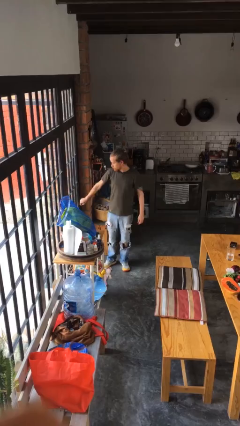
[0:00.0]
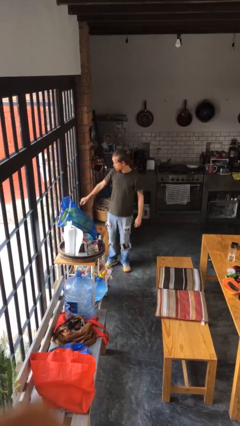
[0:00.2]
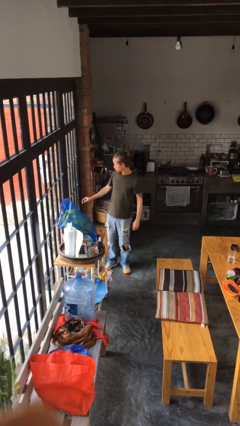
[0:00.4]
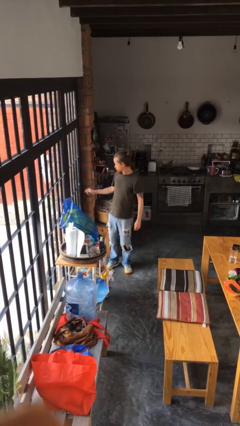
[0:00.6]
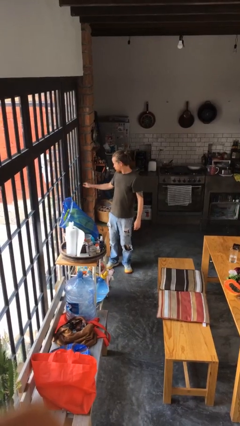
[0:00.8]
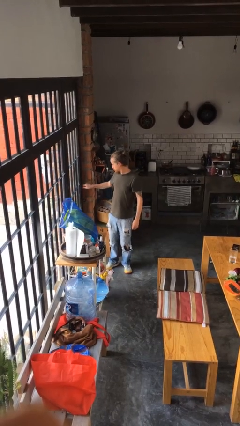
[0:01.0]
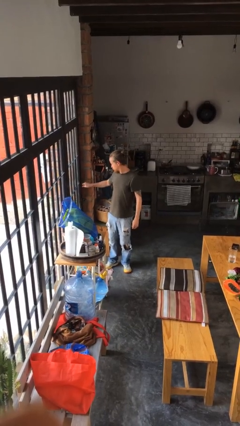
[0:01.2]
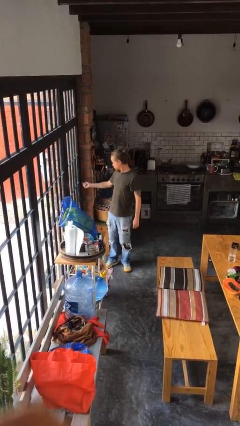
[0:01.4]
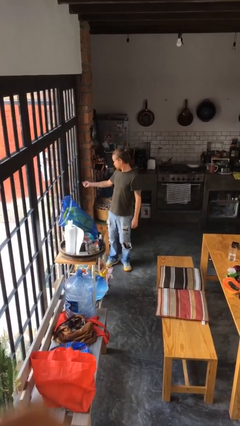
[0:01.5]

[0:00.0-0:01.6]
person locks door with keys

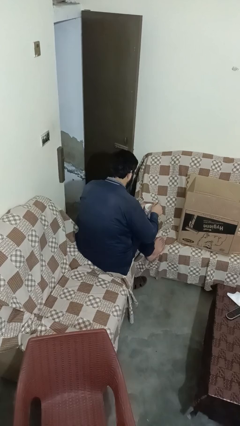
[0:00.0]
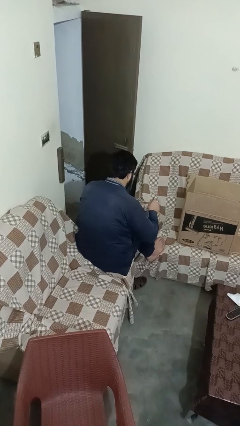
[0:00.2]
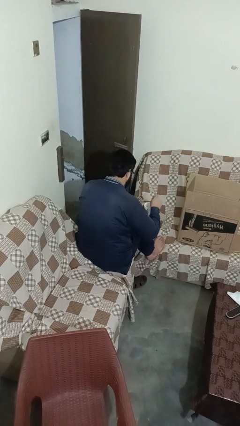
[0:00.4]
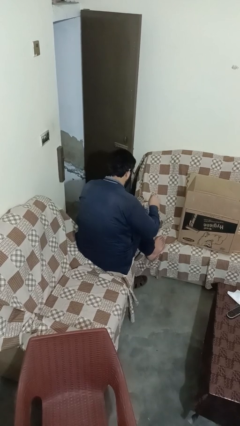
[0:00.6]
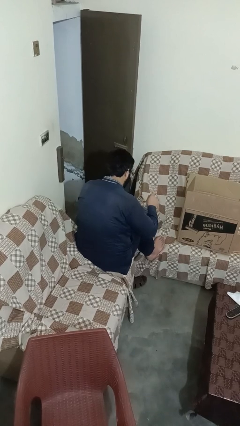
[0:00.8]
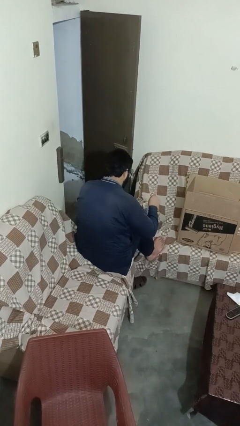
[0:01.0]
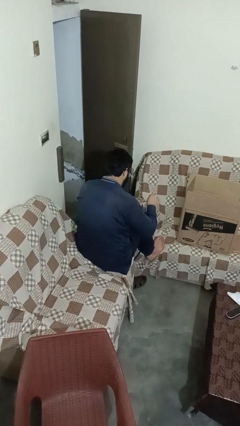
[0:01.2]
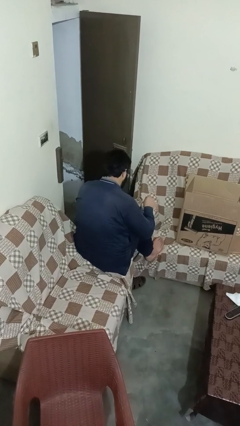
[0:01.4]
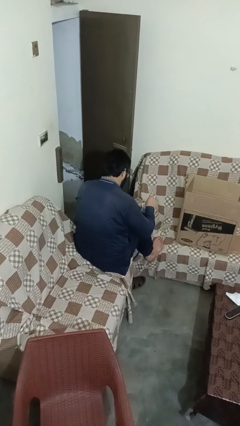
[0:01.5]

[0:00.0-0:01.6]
person stirs mug

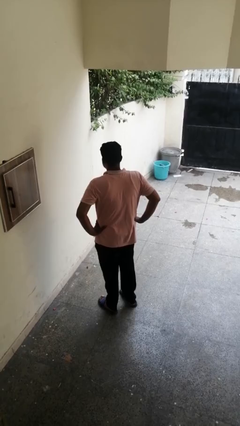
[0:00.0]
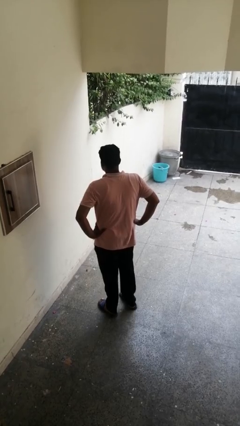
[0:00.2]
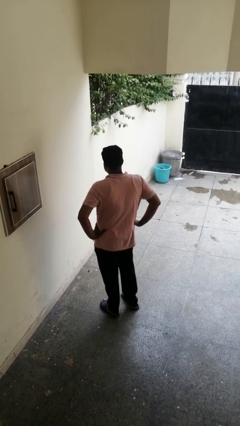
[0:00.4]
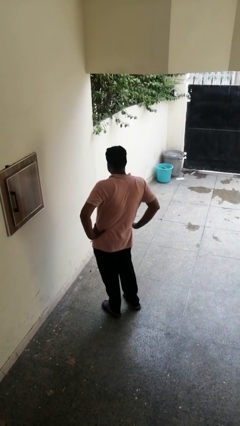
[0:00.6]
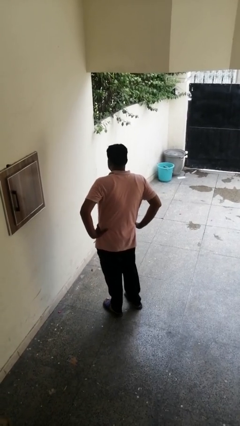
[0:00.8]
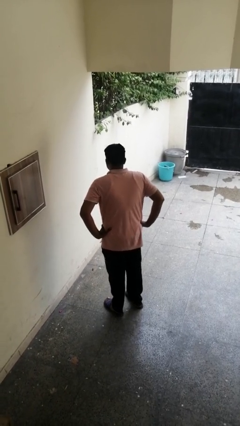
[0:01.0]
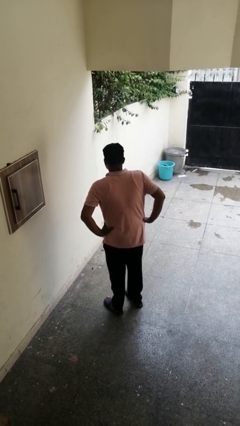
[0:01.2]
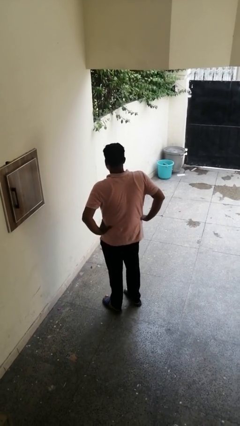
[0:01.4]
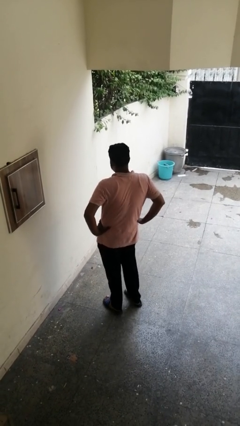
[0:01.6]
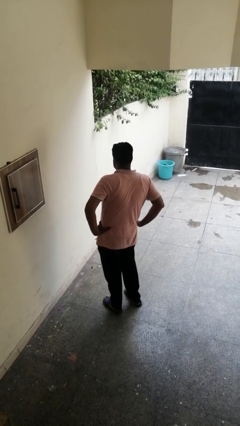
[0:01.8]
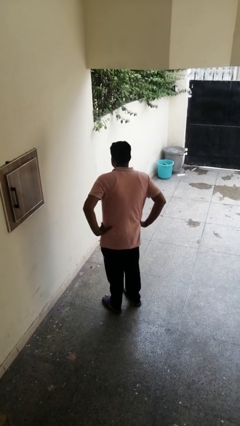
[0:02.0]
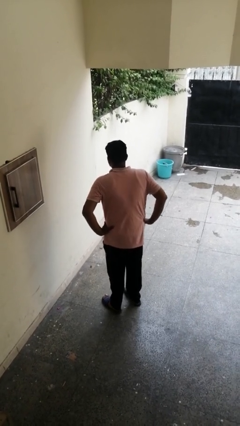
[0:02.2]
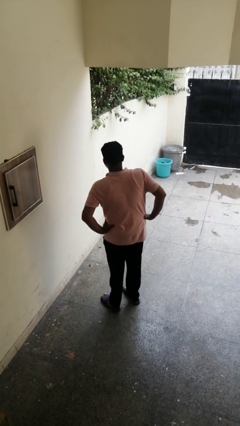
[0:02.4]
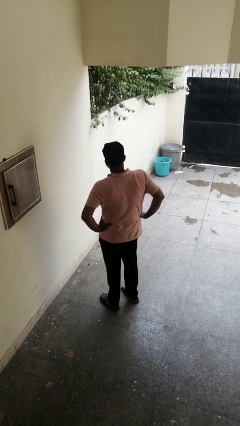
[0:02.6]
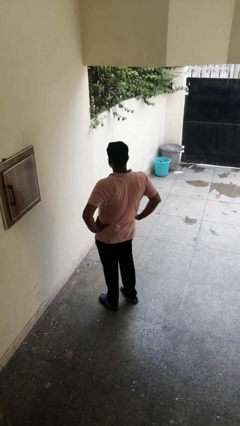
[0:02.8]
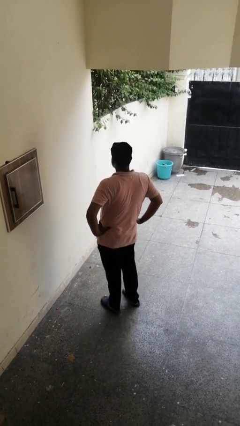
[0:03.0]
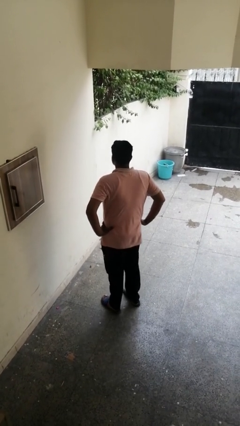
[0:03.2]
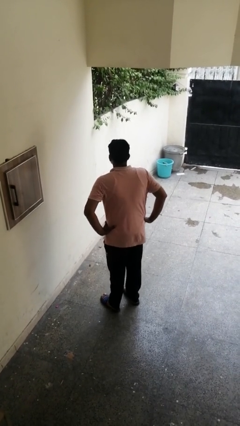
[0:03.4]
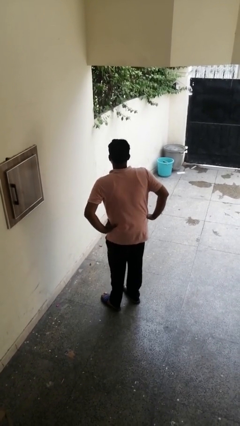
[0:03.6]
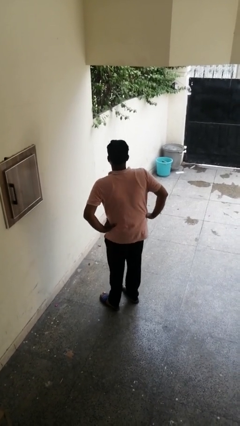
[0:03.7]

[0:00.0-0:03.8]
person wiggles hips

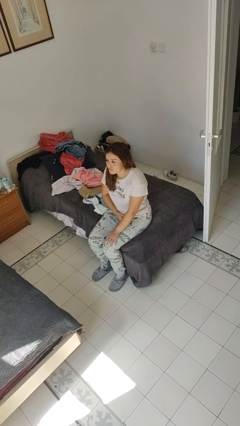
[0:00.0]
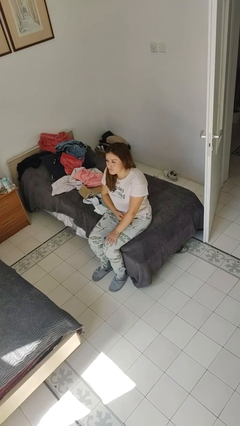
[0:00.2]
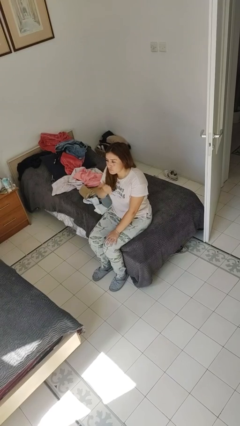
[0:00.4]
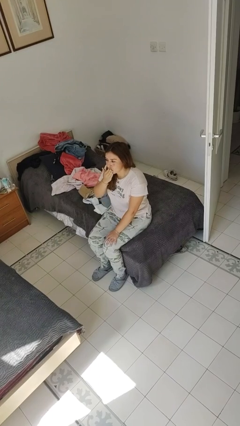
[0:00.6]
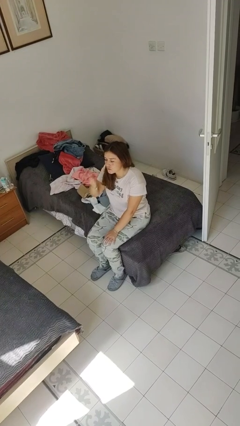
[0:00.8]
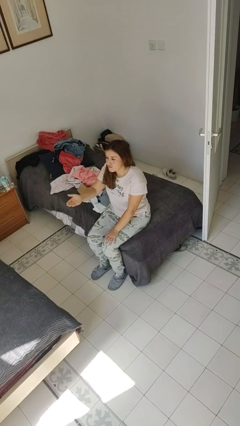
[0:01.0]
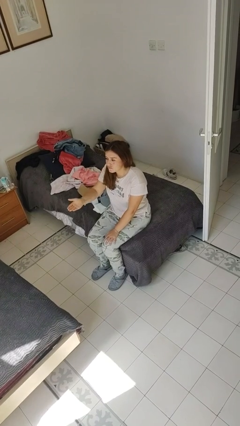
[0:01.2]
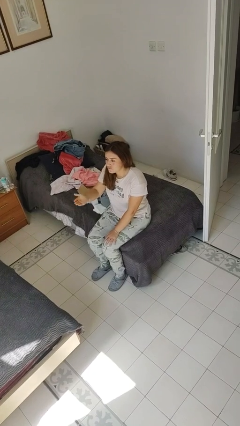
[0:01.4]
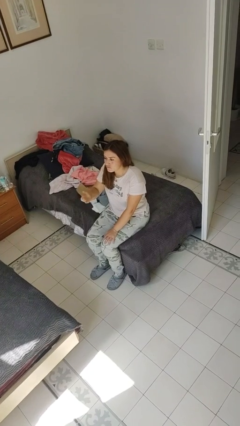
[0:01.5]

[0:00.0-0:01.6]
person gestures blow kiss

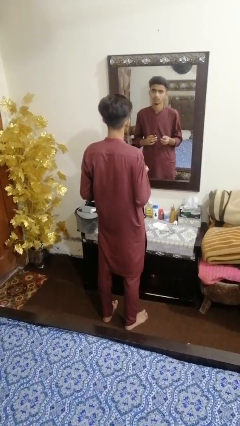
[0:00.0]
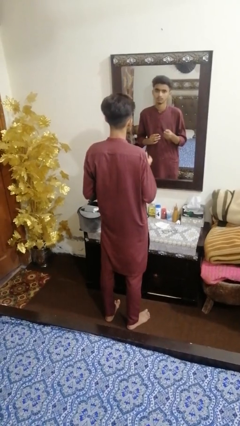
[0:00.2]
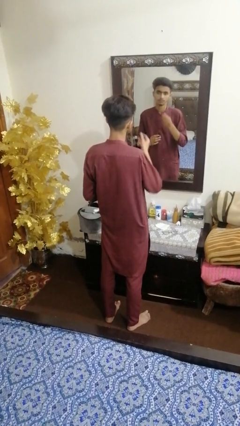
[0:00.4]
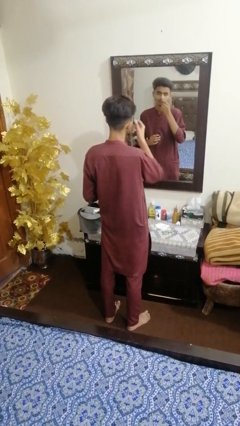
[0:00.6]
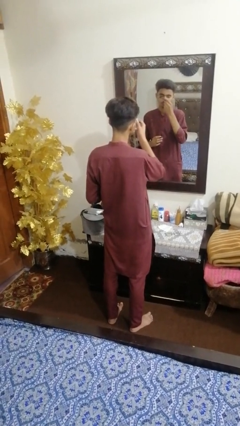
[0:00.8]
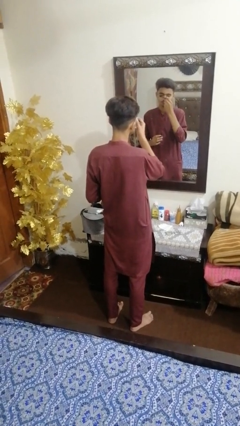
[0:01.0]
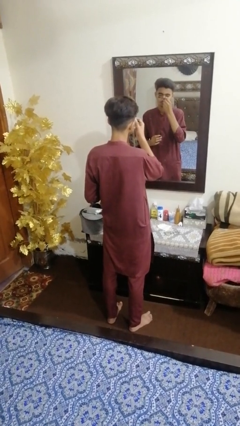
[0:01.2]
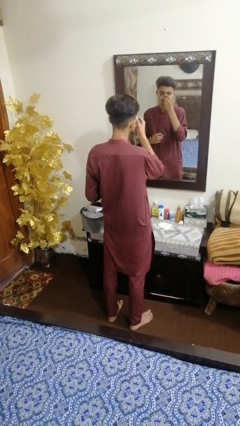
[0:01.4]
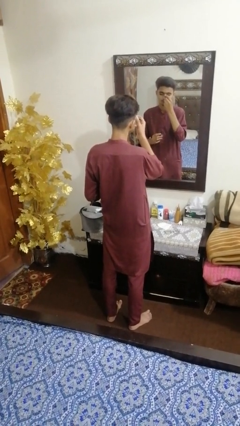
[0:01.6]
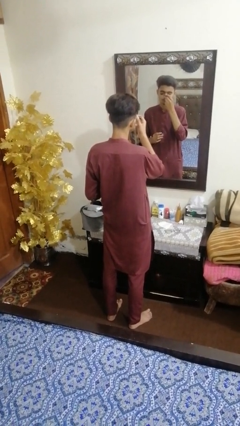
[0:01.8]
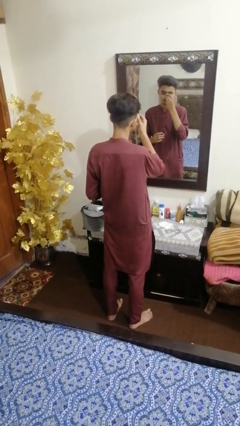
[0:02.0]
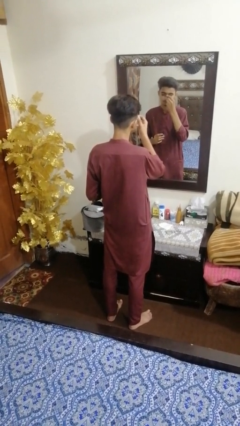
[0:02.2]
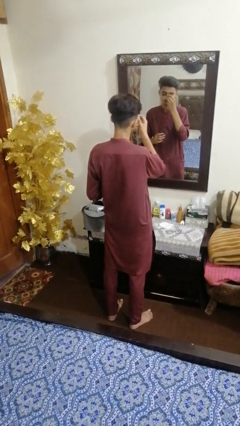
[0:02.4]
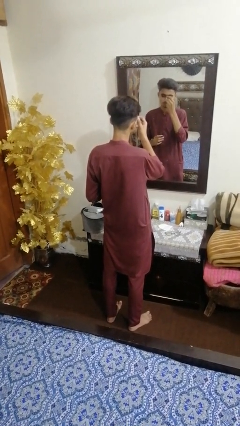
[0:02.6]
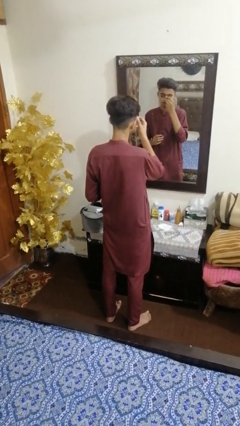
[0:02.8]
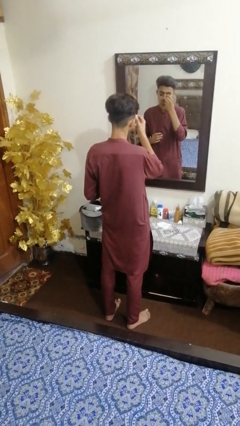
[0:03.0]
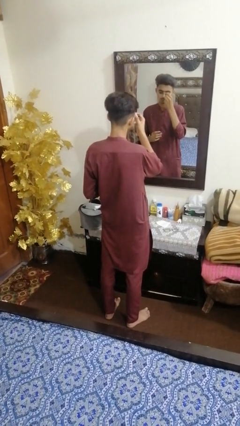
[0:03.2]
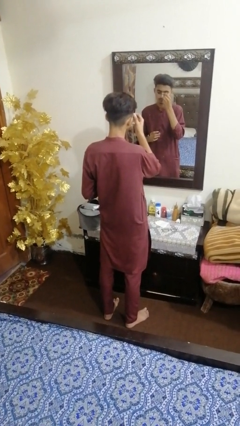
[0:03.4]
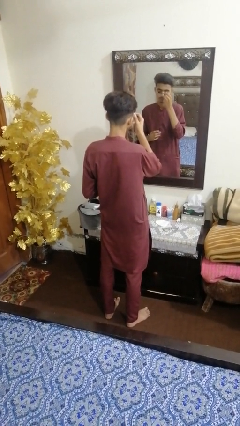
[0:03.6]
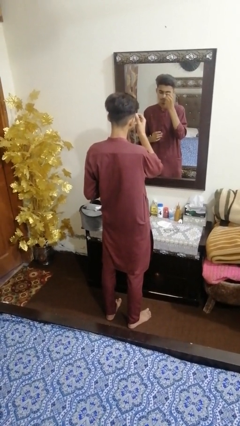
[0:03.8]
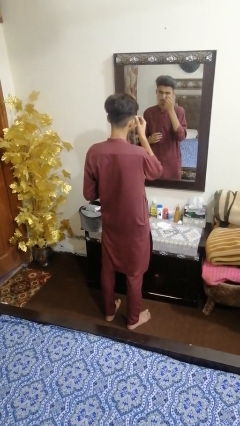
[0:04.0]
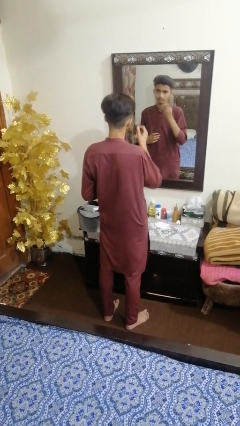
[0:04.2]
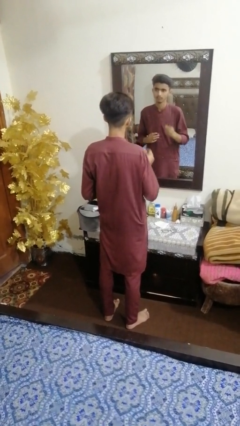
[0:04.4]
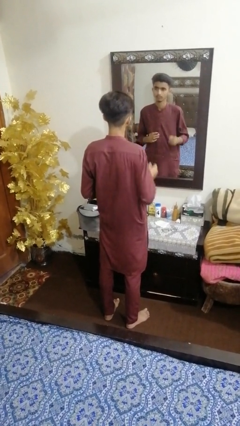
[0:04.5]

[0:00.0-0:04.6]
person applies eye makeup

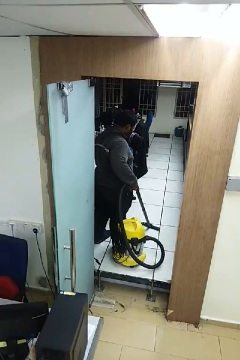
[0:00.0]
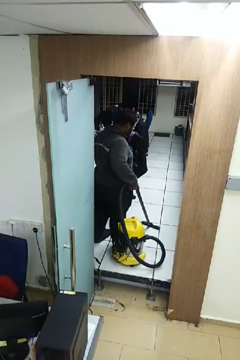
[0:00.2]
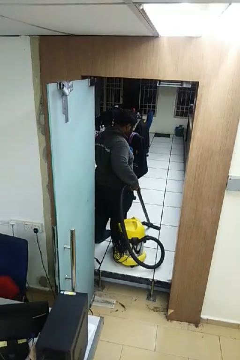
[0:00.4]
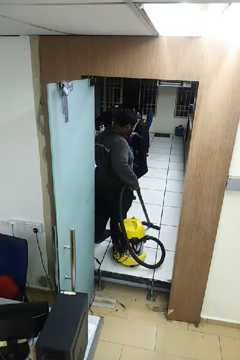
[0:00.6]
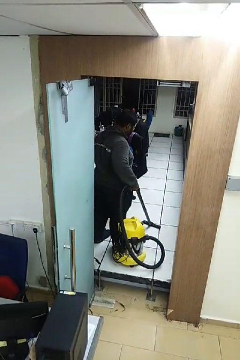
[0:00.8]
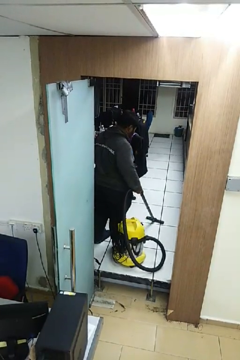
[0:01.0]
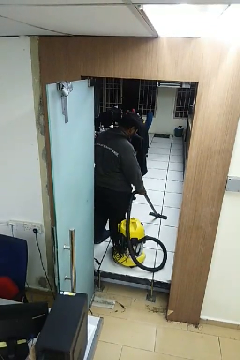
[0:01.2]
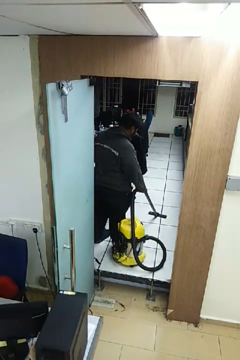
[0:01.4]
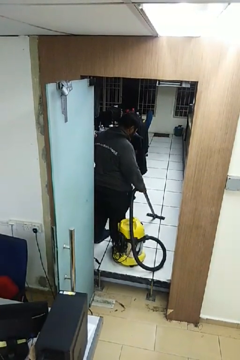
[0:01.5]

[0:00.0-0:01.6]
person vacuums carpet

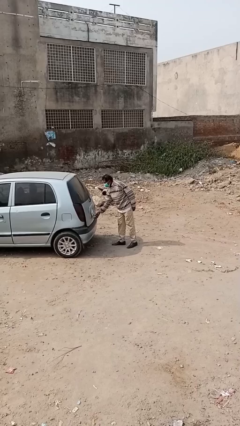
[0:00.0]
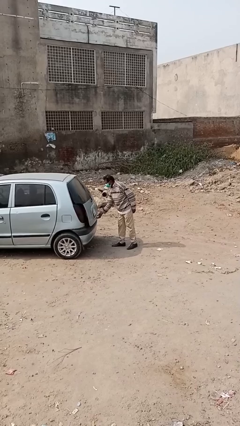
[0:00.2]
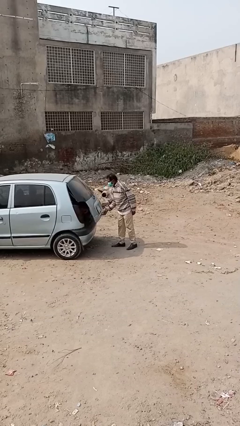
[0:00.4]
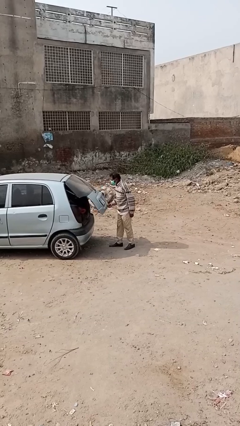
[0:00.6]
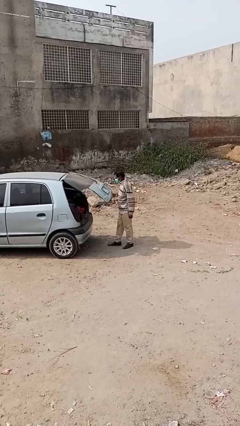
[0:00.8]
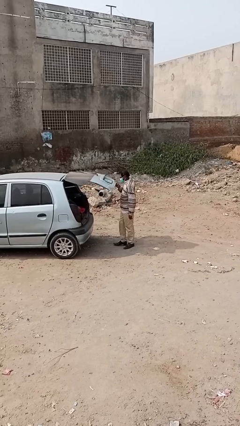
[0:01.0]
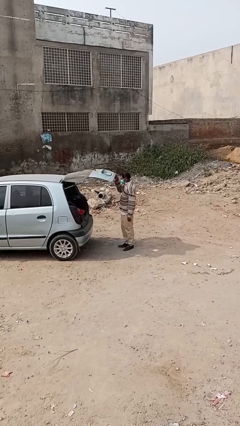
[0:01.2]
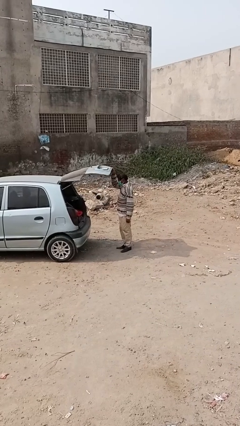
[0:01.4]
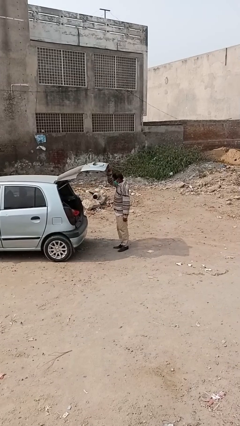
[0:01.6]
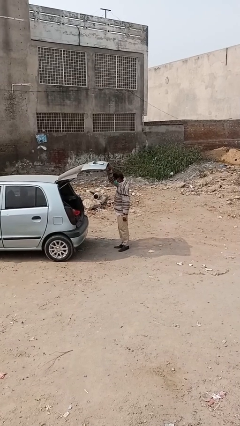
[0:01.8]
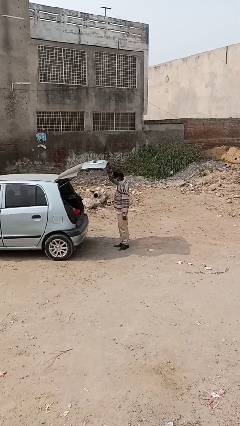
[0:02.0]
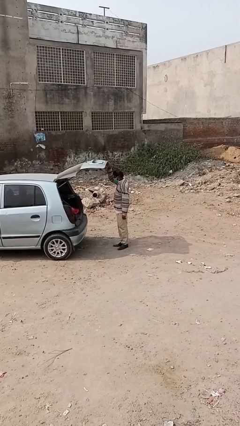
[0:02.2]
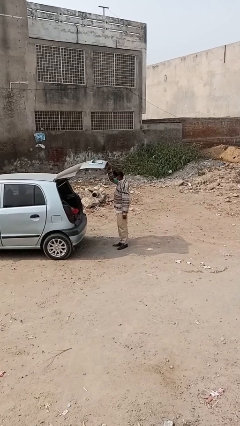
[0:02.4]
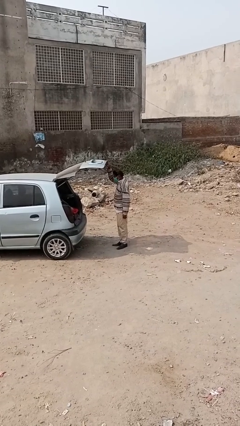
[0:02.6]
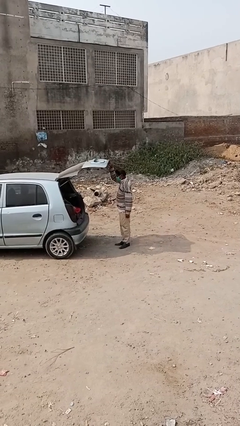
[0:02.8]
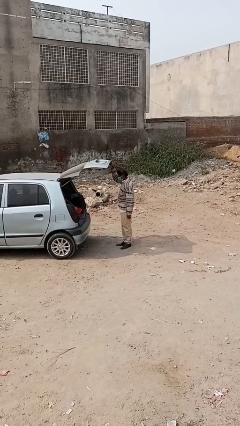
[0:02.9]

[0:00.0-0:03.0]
person opens car trunk
